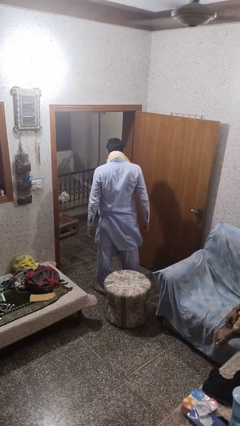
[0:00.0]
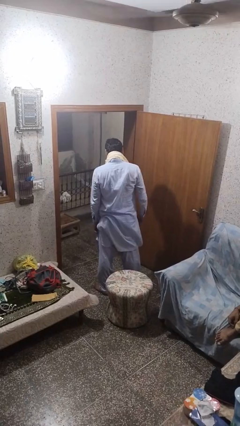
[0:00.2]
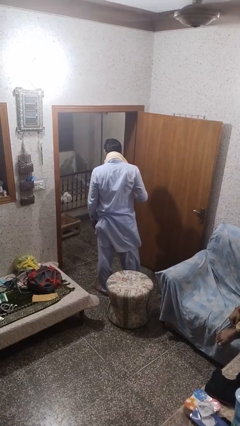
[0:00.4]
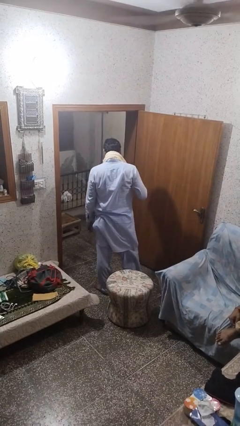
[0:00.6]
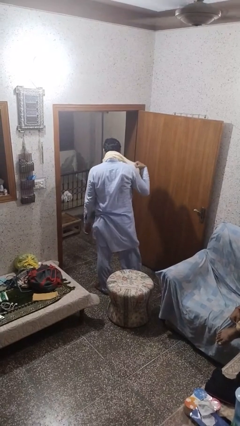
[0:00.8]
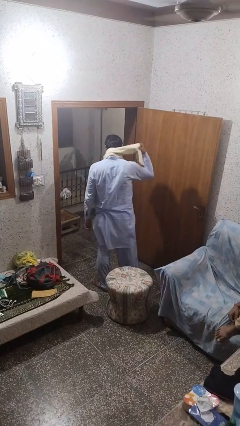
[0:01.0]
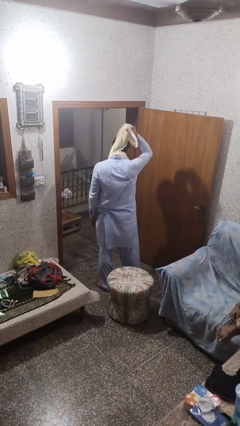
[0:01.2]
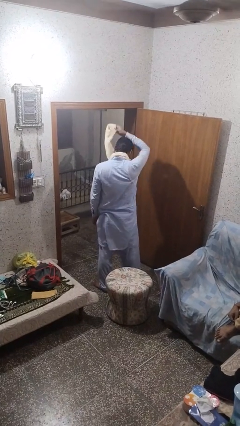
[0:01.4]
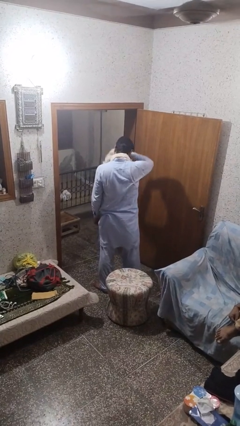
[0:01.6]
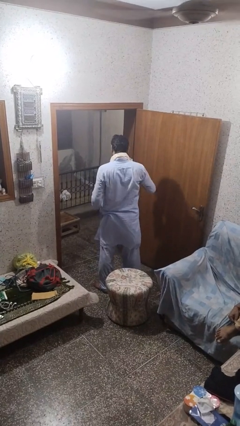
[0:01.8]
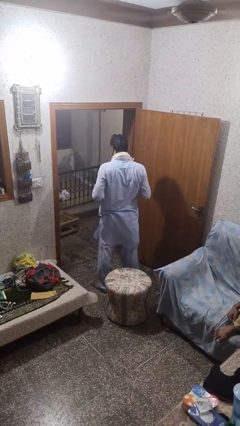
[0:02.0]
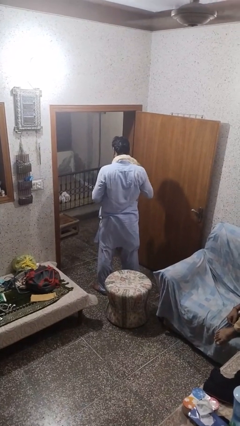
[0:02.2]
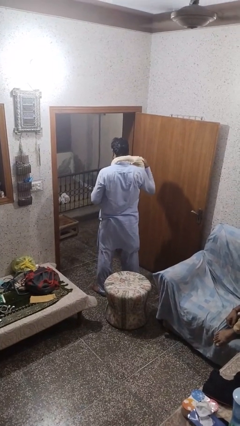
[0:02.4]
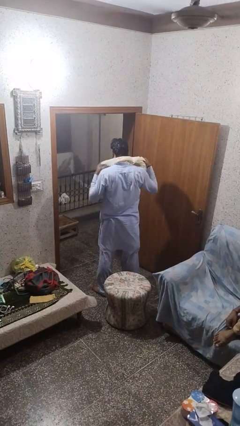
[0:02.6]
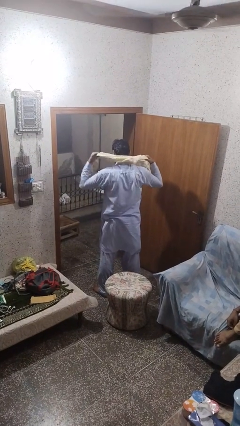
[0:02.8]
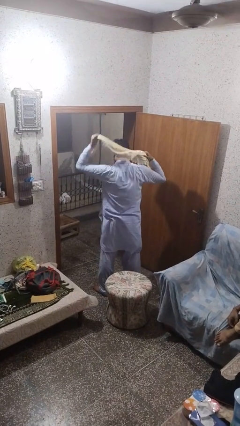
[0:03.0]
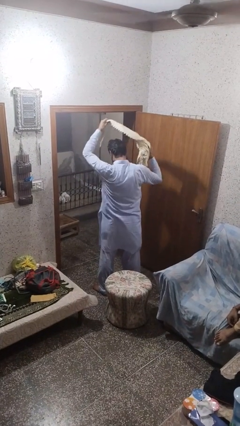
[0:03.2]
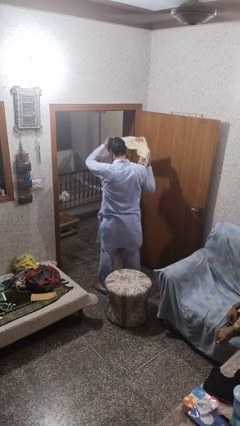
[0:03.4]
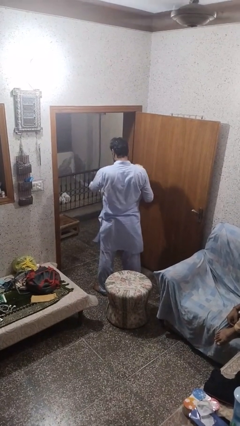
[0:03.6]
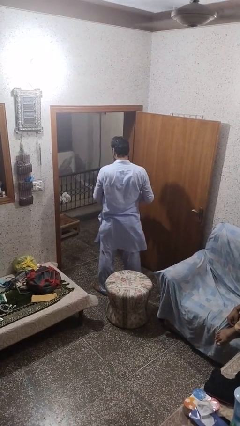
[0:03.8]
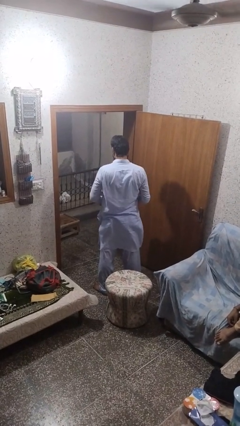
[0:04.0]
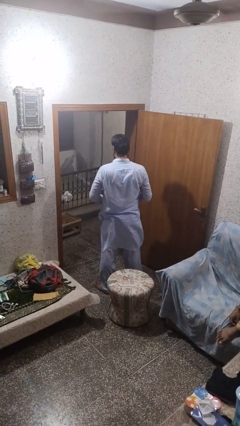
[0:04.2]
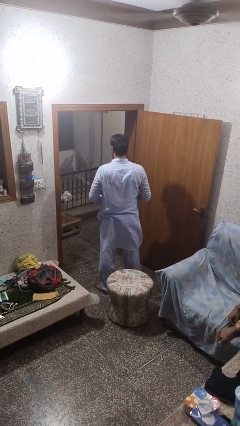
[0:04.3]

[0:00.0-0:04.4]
person takes off scarf

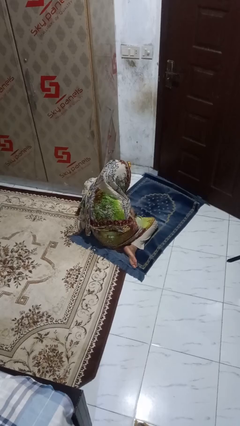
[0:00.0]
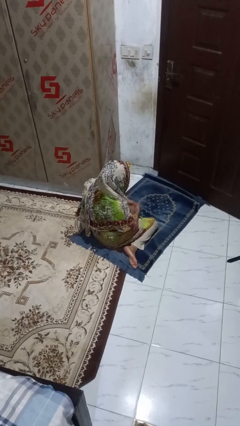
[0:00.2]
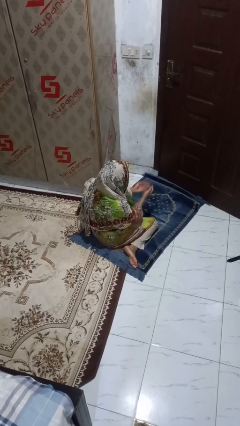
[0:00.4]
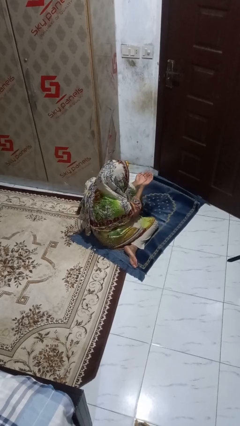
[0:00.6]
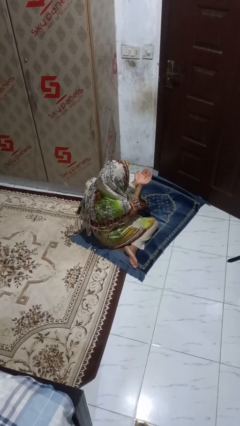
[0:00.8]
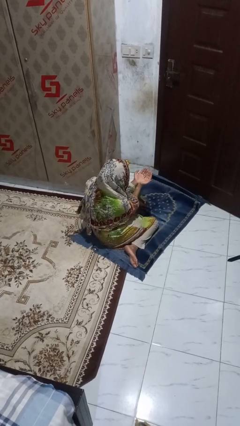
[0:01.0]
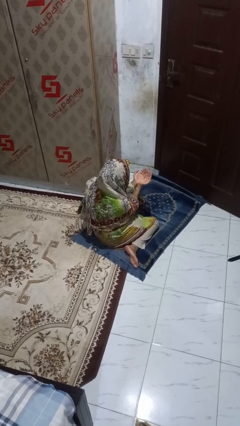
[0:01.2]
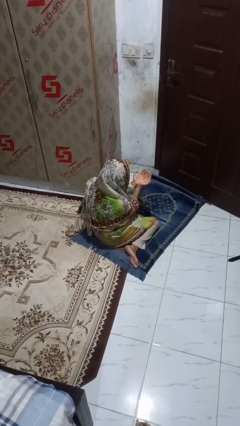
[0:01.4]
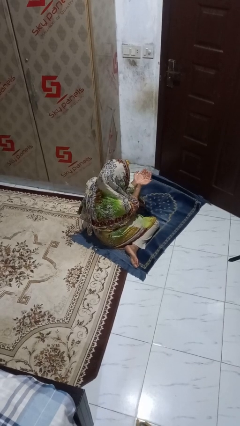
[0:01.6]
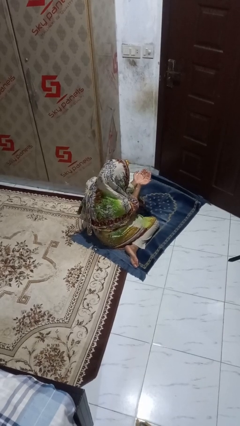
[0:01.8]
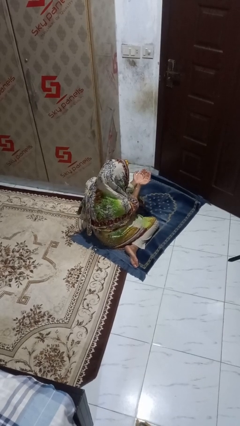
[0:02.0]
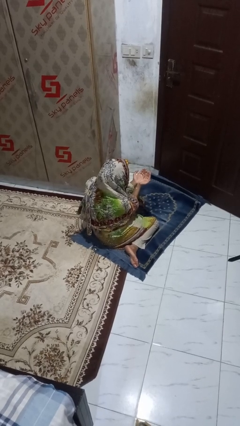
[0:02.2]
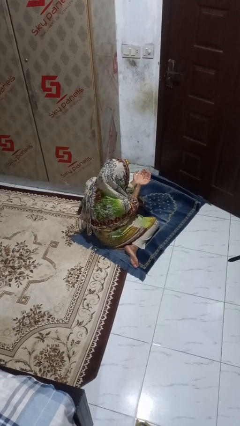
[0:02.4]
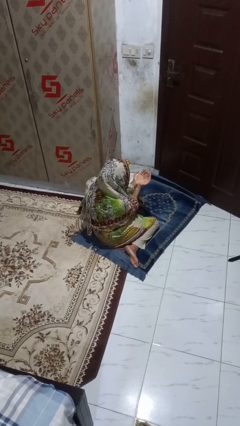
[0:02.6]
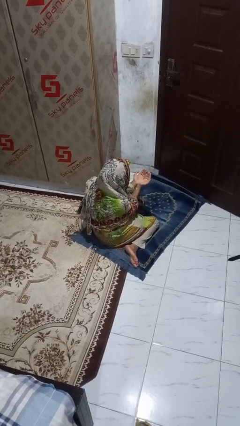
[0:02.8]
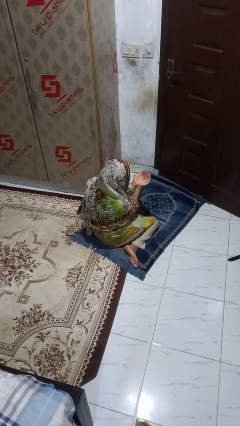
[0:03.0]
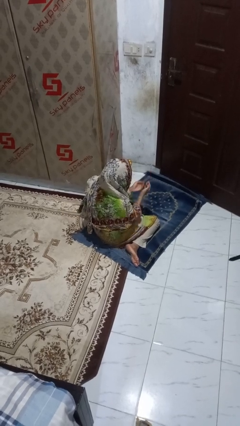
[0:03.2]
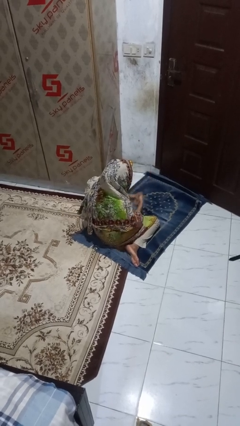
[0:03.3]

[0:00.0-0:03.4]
person prays

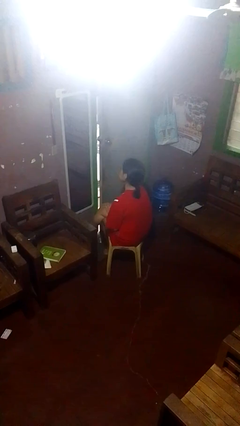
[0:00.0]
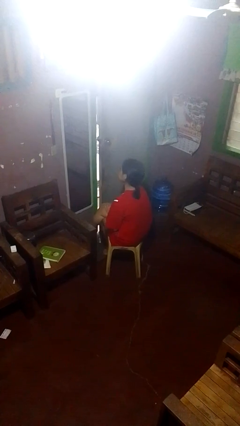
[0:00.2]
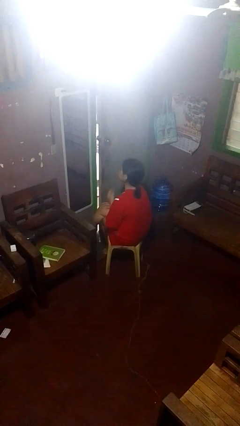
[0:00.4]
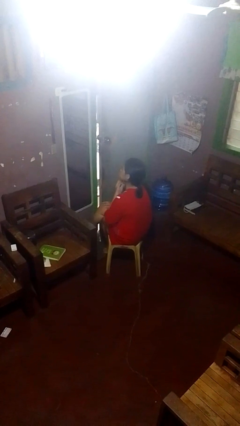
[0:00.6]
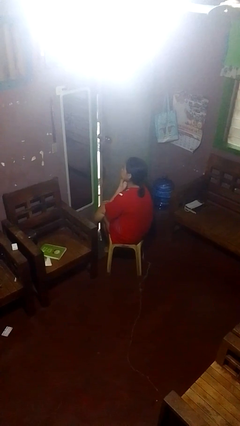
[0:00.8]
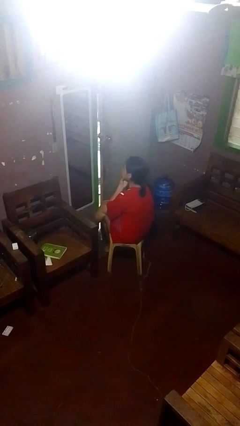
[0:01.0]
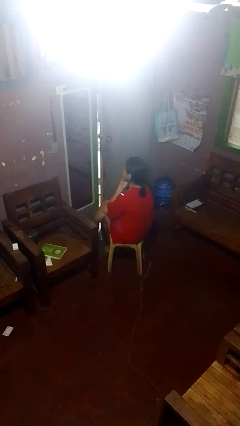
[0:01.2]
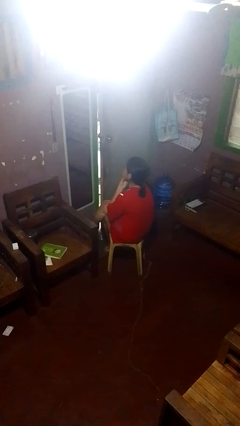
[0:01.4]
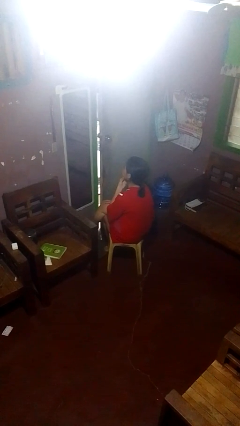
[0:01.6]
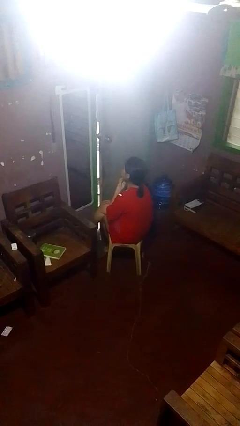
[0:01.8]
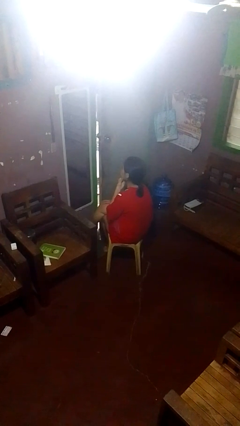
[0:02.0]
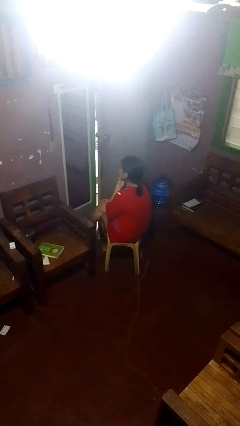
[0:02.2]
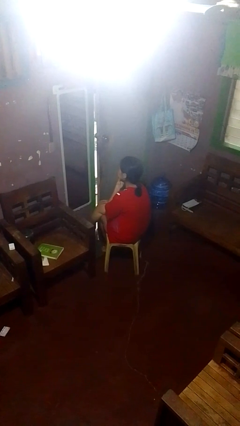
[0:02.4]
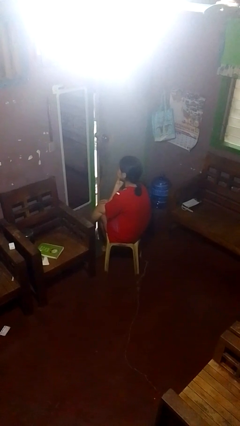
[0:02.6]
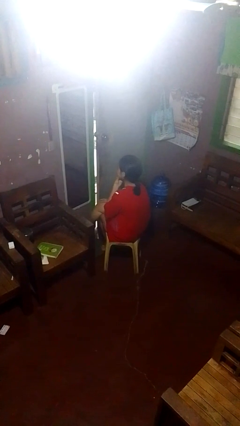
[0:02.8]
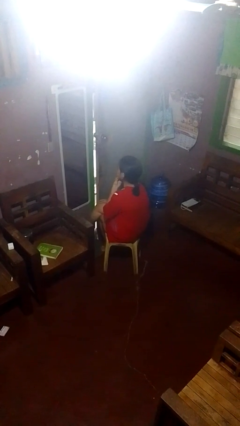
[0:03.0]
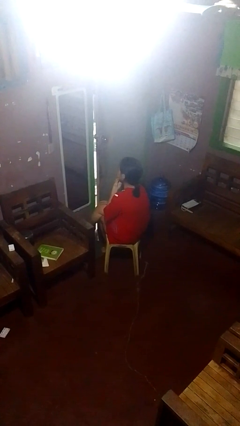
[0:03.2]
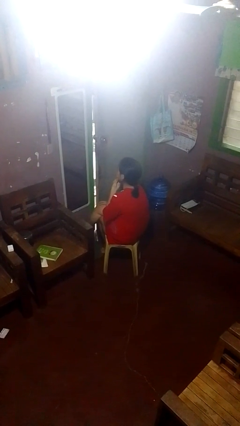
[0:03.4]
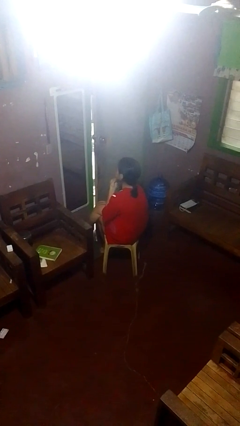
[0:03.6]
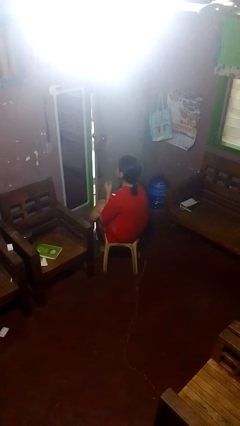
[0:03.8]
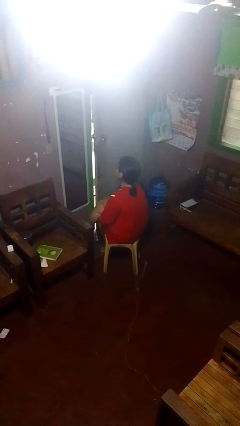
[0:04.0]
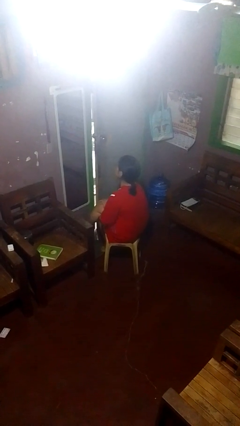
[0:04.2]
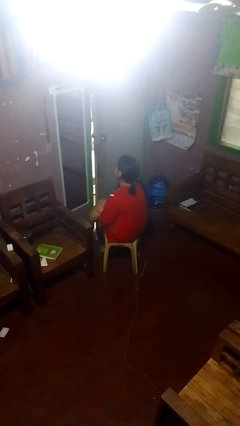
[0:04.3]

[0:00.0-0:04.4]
person strokes chin

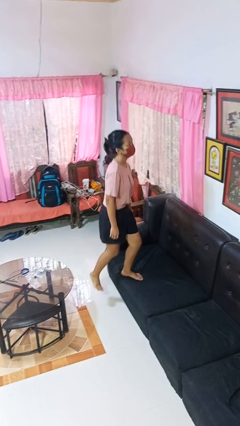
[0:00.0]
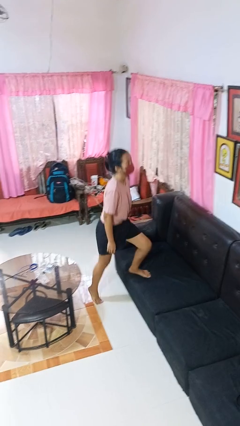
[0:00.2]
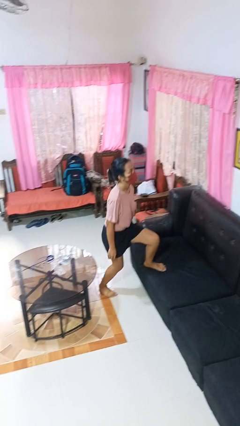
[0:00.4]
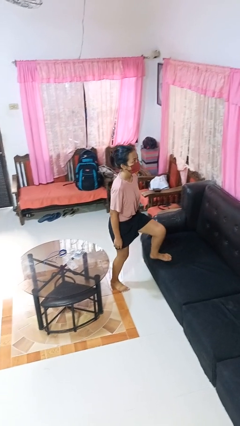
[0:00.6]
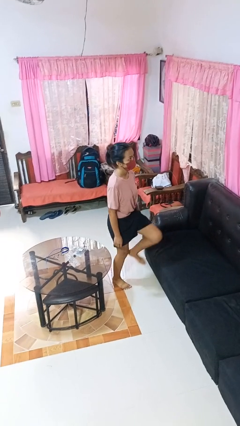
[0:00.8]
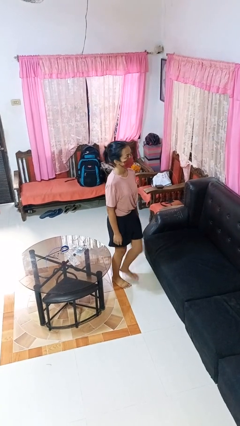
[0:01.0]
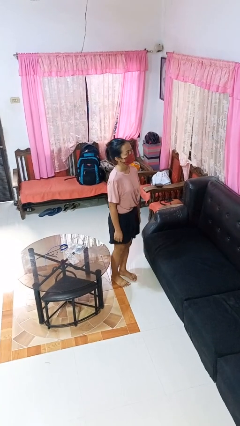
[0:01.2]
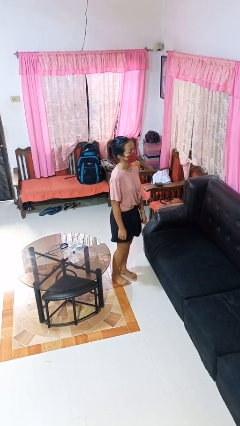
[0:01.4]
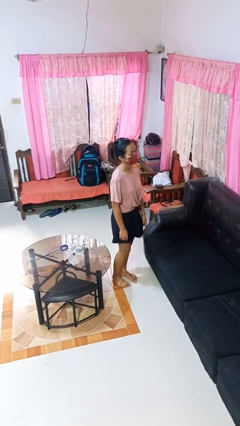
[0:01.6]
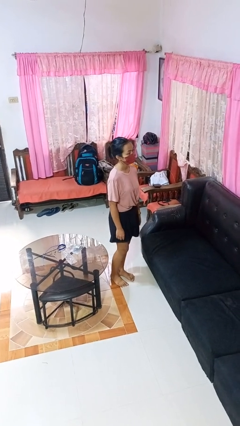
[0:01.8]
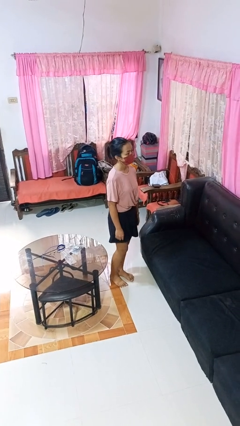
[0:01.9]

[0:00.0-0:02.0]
person climbs off couch

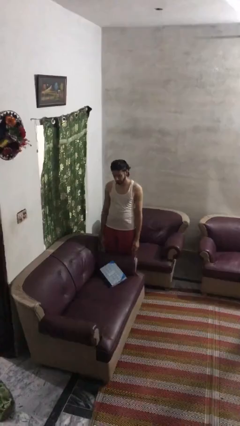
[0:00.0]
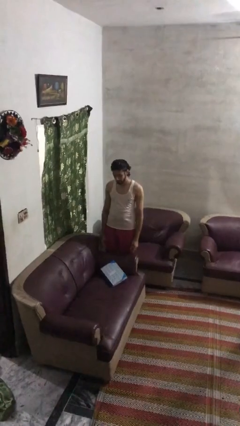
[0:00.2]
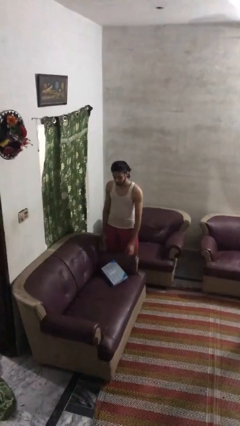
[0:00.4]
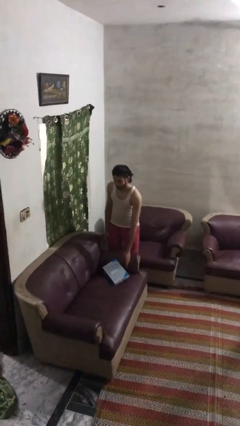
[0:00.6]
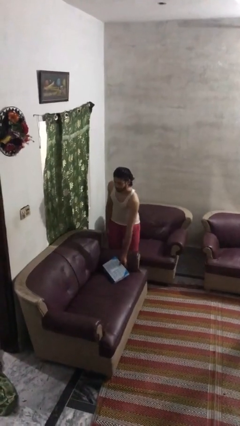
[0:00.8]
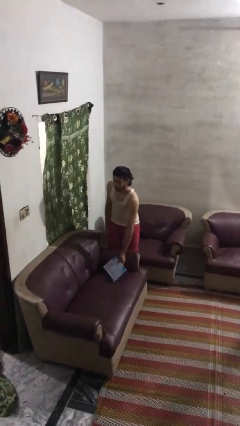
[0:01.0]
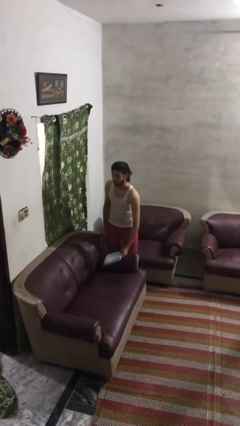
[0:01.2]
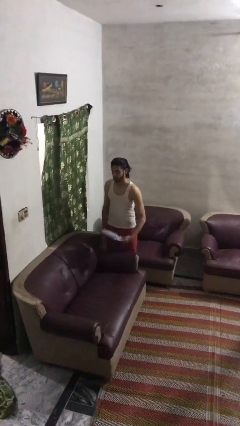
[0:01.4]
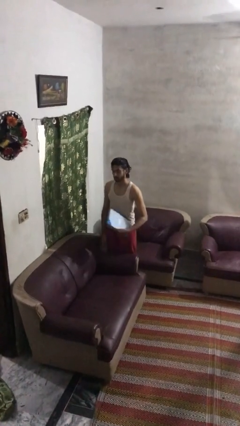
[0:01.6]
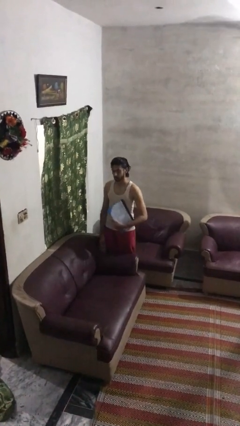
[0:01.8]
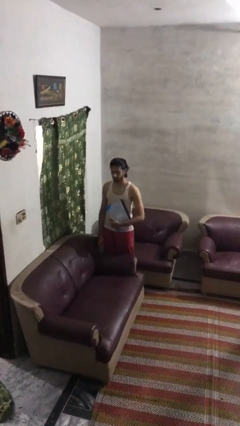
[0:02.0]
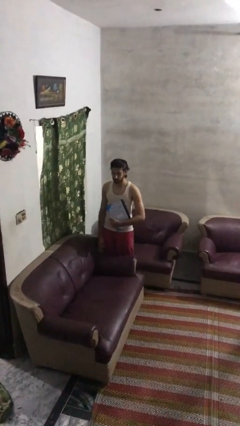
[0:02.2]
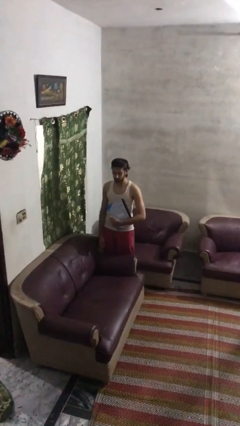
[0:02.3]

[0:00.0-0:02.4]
person picks up object from couch

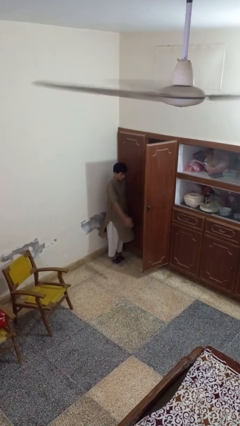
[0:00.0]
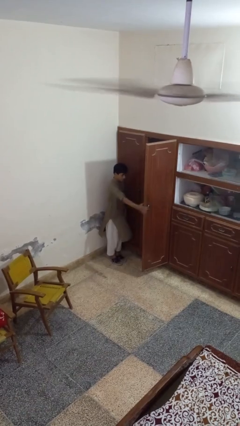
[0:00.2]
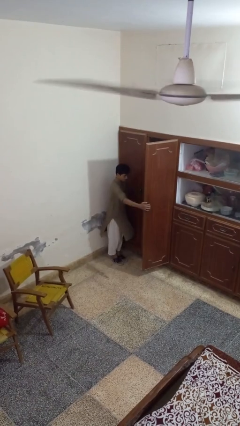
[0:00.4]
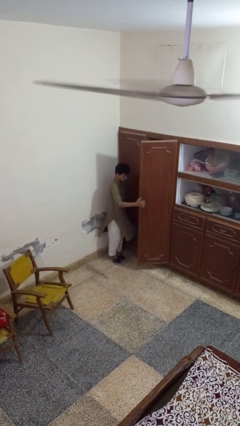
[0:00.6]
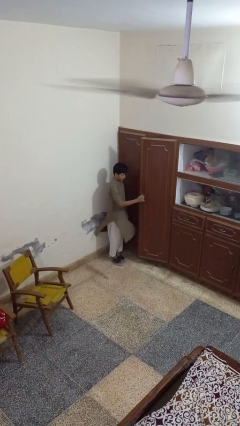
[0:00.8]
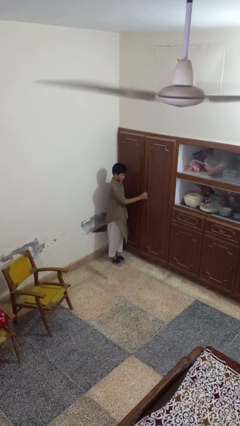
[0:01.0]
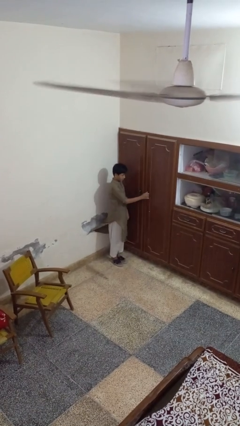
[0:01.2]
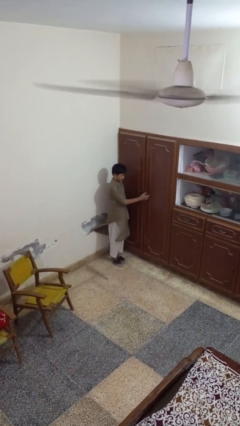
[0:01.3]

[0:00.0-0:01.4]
person closes closet door
